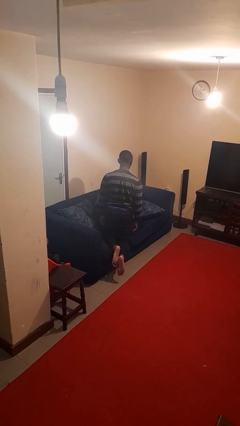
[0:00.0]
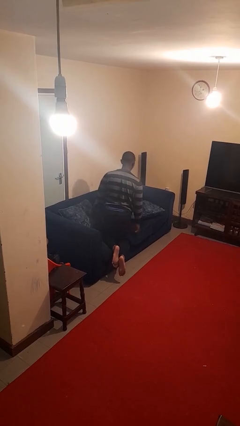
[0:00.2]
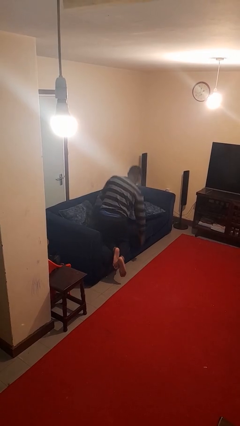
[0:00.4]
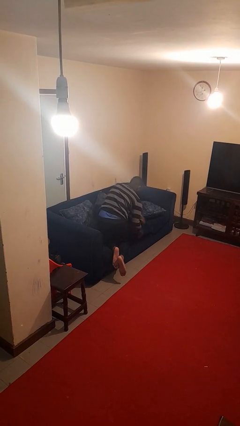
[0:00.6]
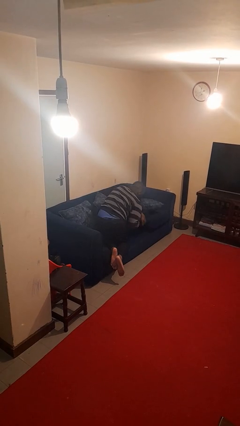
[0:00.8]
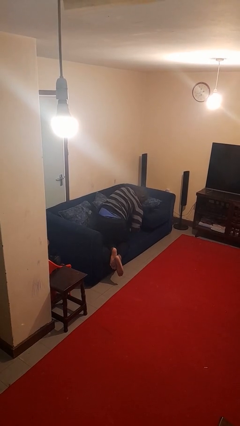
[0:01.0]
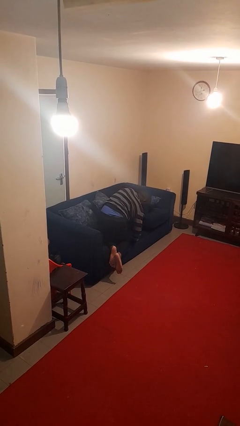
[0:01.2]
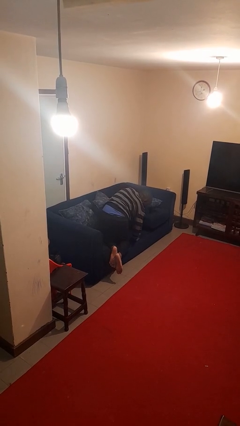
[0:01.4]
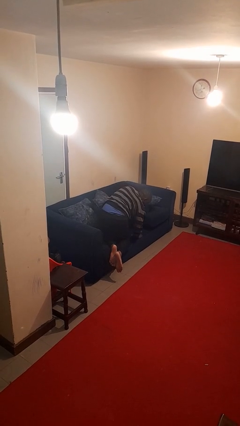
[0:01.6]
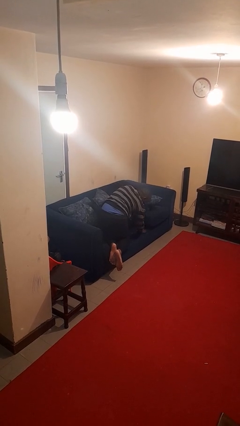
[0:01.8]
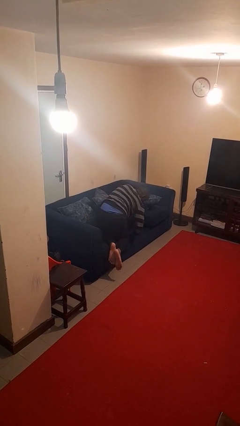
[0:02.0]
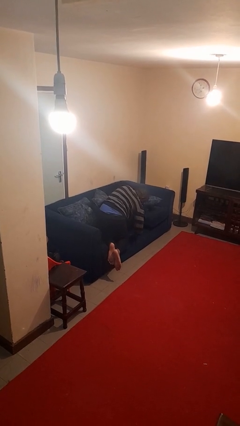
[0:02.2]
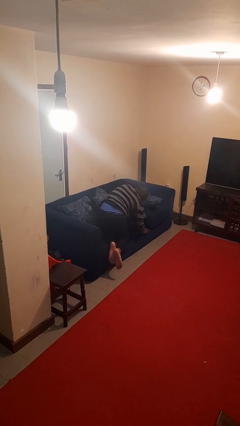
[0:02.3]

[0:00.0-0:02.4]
person searches in couch

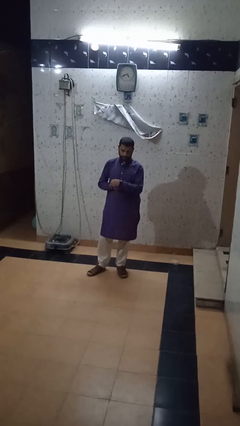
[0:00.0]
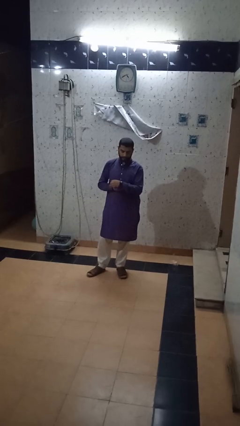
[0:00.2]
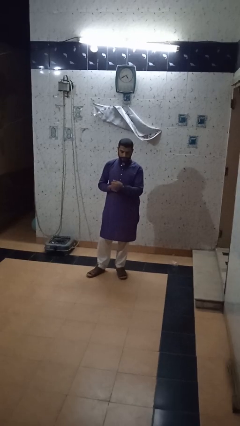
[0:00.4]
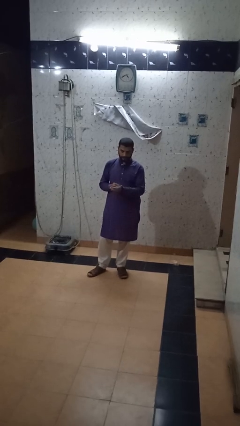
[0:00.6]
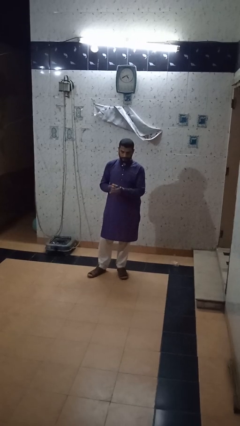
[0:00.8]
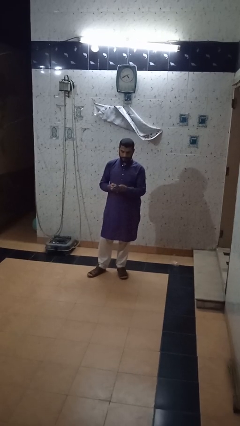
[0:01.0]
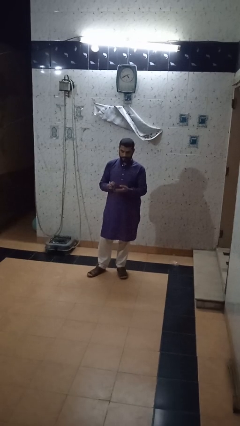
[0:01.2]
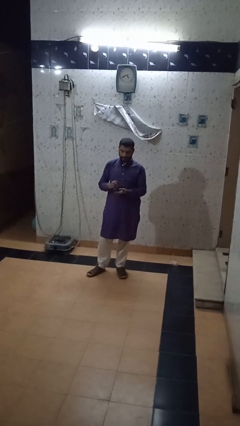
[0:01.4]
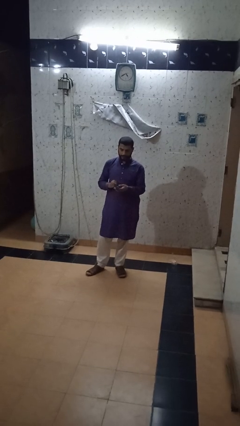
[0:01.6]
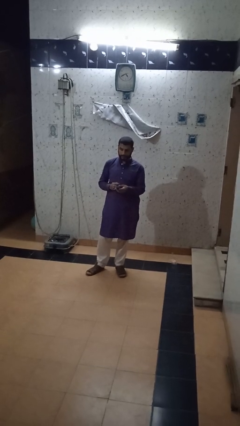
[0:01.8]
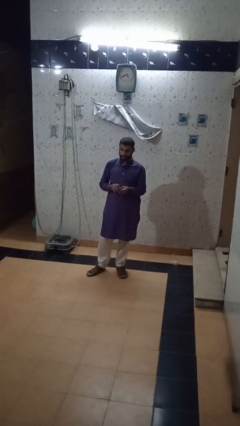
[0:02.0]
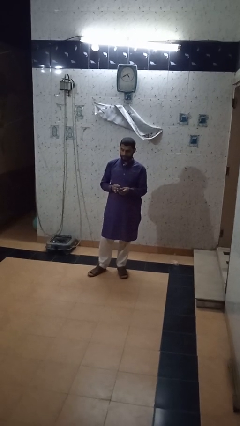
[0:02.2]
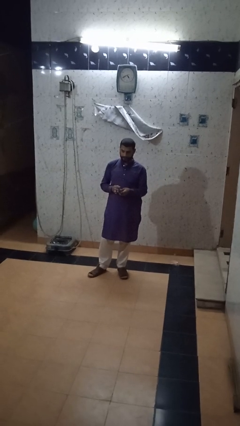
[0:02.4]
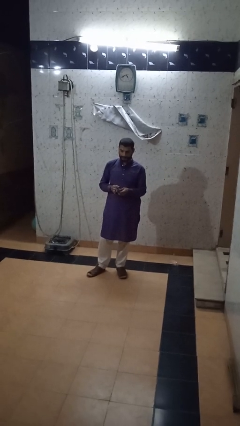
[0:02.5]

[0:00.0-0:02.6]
person takes off wristwatch

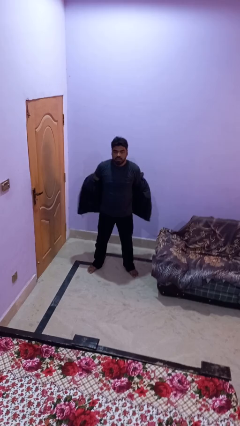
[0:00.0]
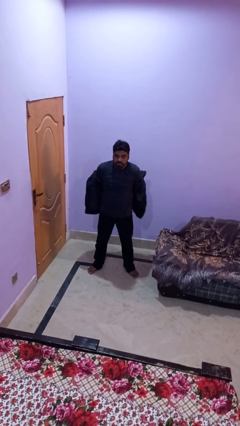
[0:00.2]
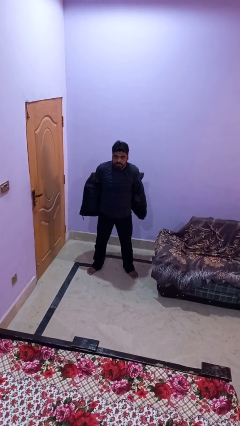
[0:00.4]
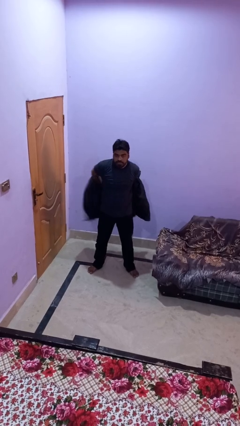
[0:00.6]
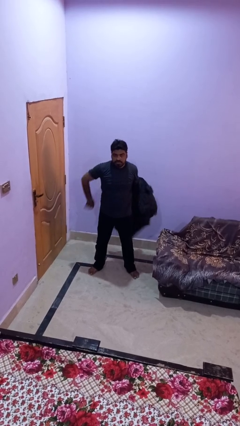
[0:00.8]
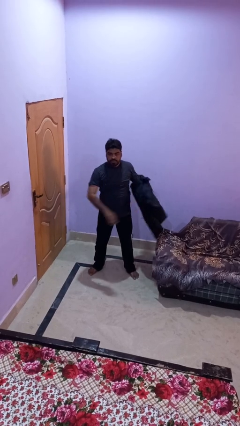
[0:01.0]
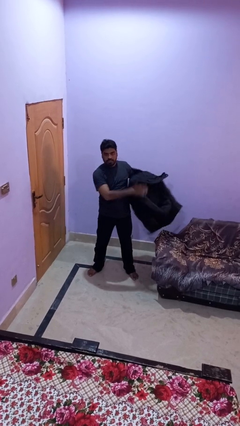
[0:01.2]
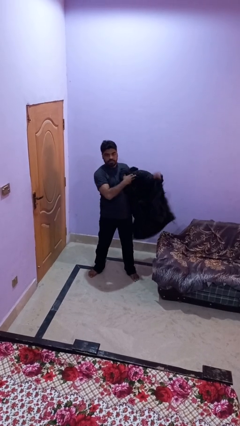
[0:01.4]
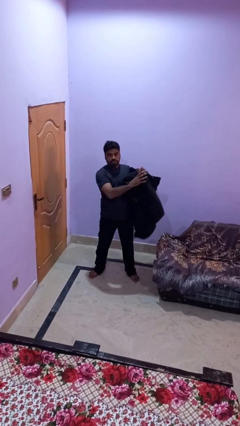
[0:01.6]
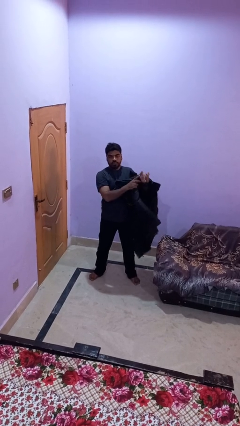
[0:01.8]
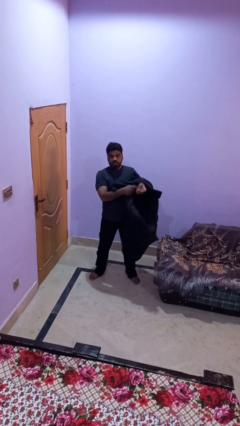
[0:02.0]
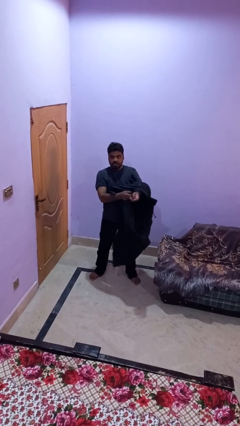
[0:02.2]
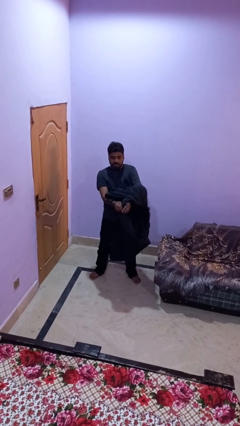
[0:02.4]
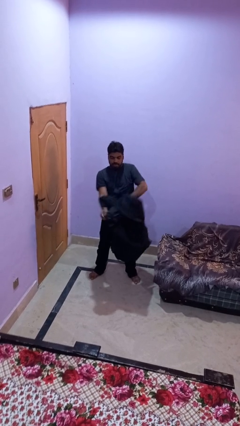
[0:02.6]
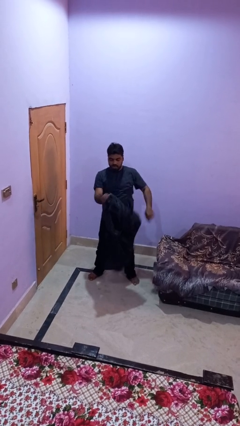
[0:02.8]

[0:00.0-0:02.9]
person takes off jacket

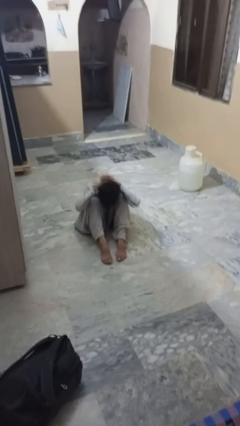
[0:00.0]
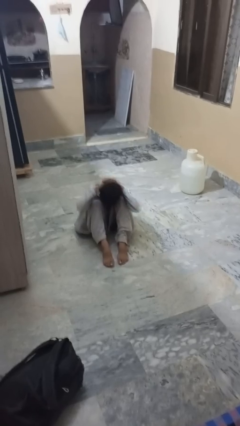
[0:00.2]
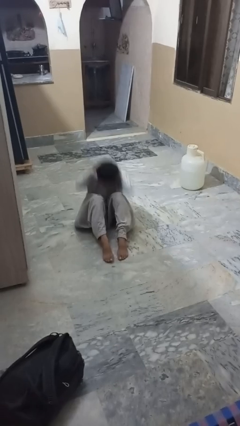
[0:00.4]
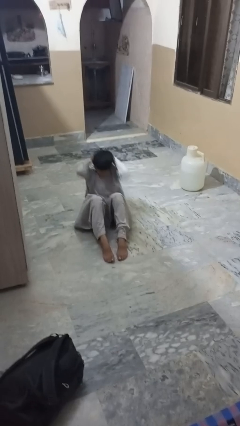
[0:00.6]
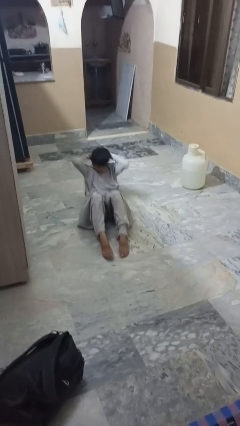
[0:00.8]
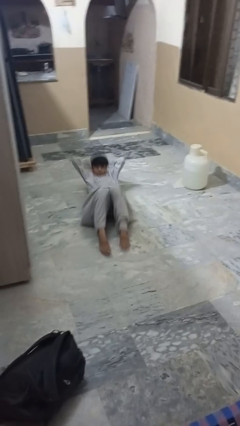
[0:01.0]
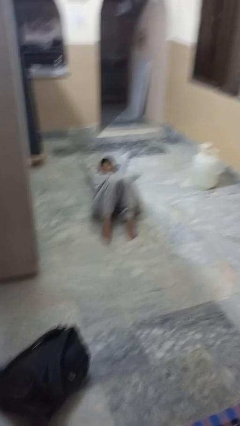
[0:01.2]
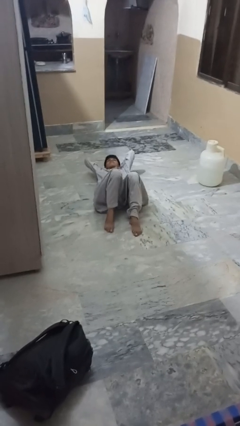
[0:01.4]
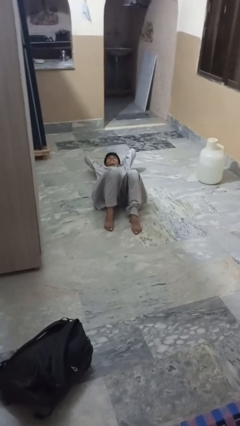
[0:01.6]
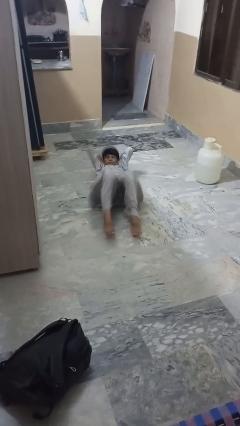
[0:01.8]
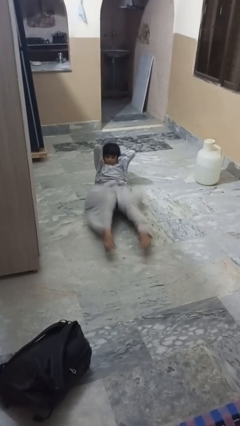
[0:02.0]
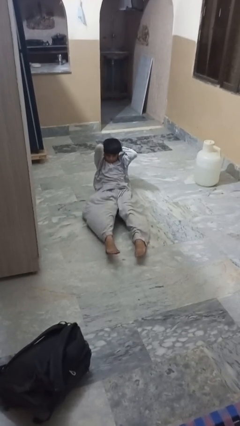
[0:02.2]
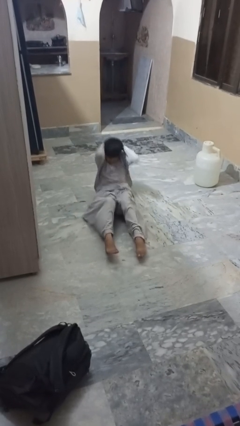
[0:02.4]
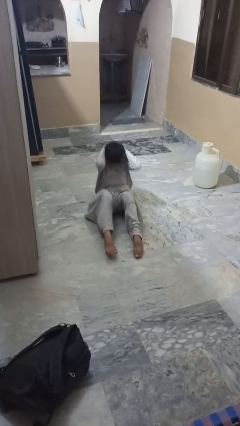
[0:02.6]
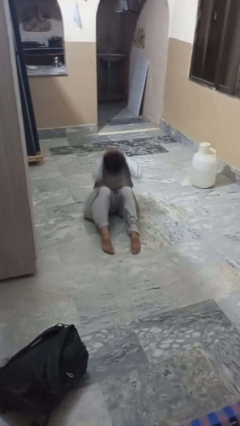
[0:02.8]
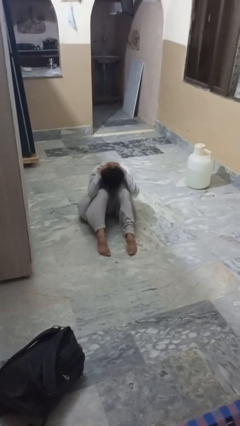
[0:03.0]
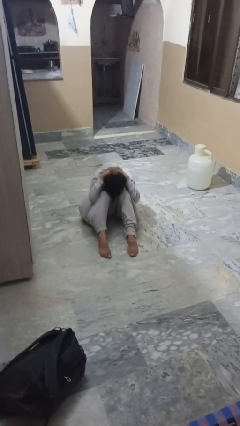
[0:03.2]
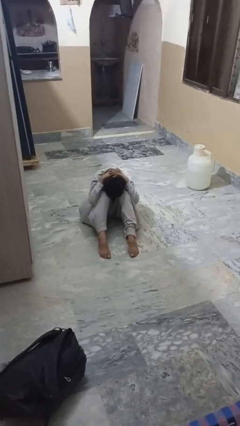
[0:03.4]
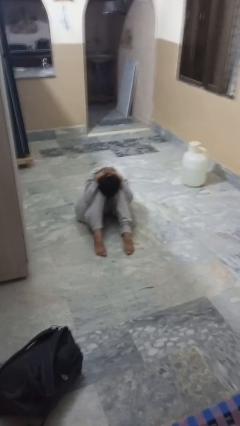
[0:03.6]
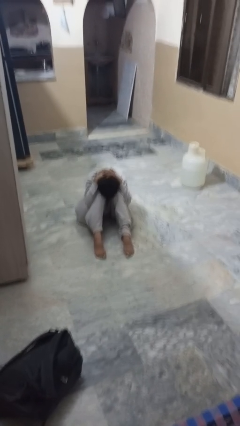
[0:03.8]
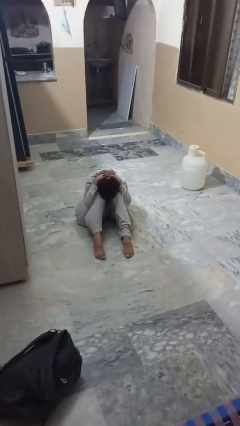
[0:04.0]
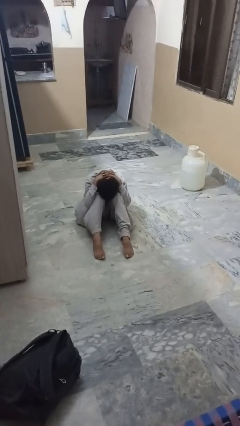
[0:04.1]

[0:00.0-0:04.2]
person exercises with situp

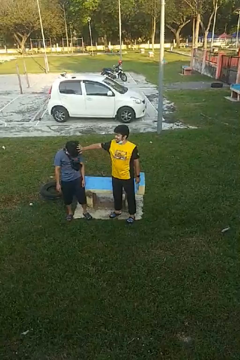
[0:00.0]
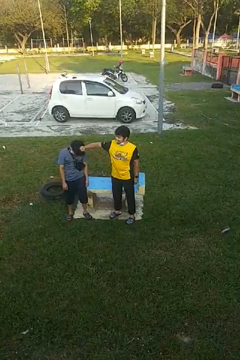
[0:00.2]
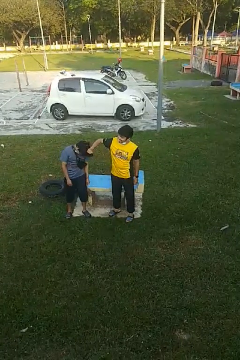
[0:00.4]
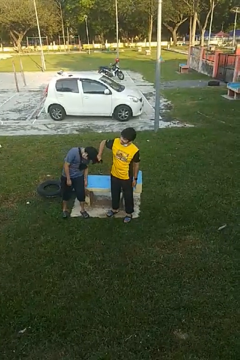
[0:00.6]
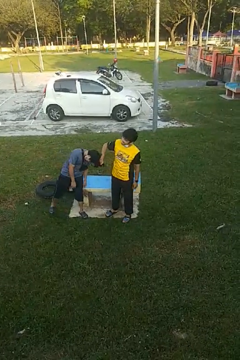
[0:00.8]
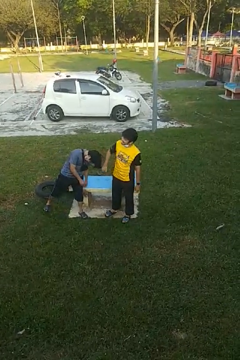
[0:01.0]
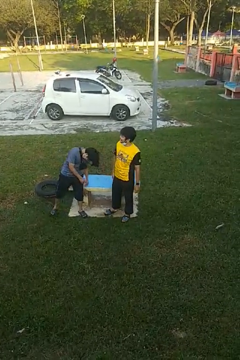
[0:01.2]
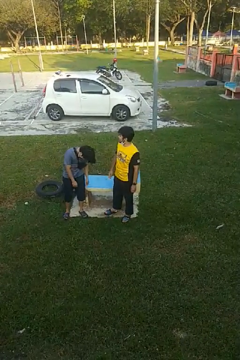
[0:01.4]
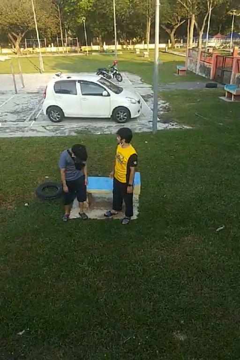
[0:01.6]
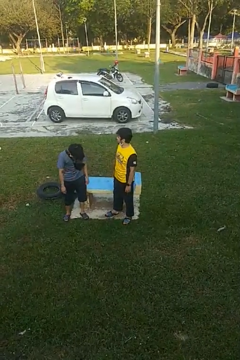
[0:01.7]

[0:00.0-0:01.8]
person grabs person by hair

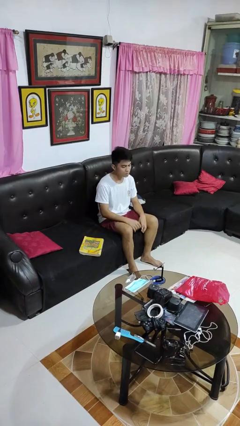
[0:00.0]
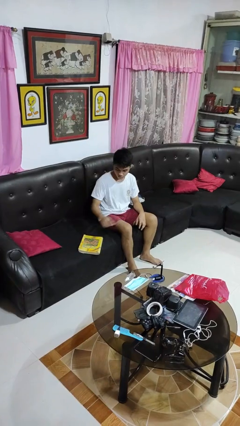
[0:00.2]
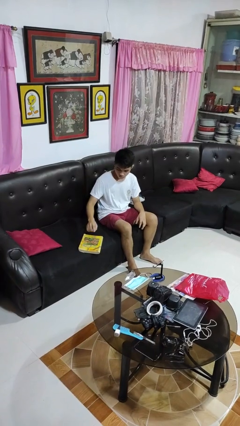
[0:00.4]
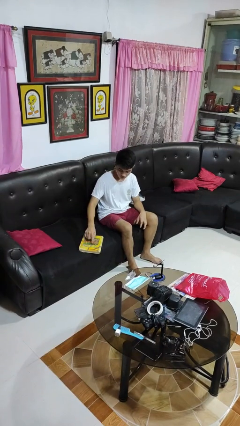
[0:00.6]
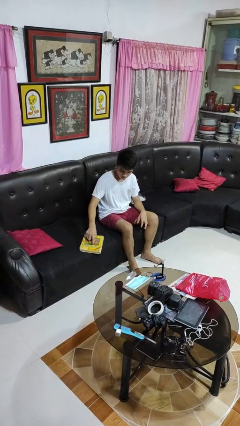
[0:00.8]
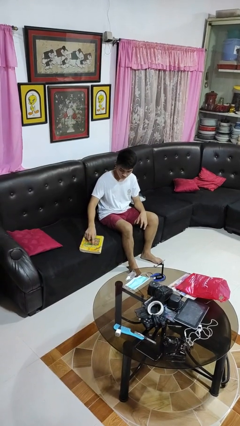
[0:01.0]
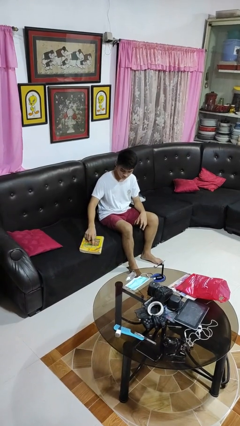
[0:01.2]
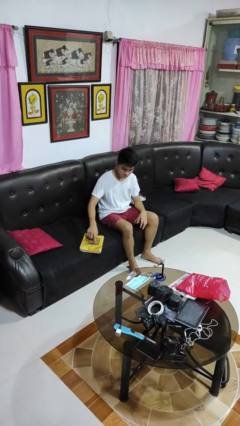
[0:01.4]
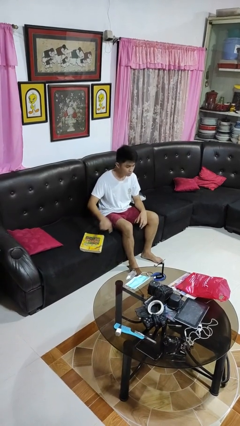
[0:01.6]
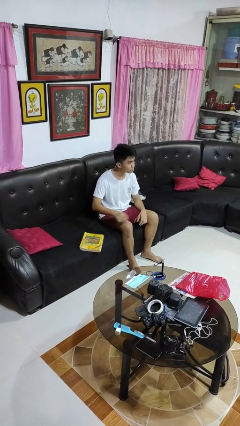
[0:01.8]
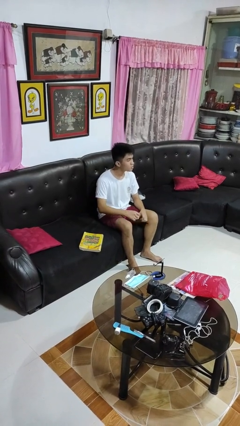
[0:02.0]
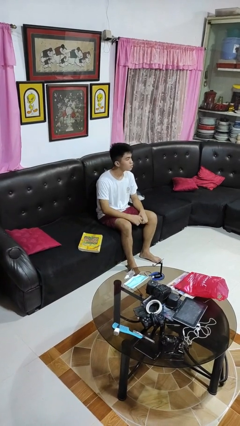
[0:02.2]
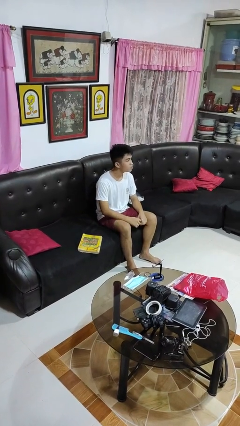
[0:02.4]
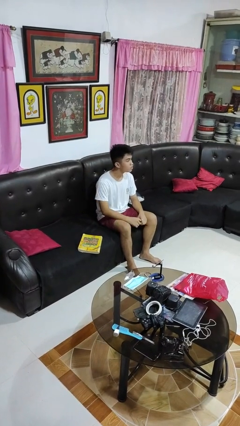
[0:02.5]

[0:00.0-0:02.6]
person taps object with finger

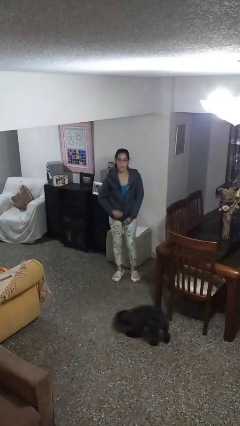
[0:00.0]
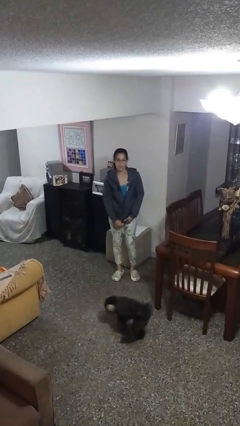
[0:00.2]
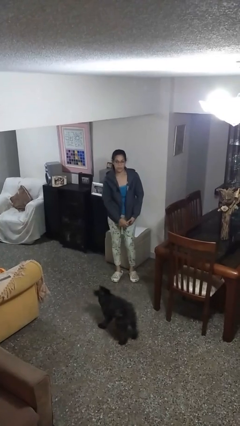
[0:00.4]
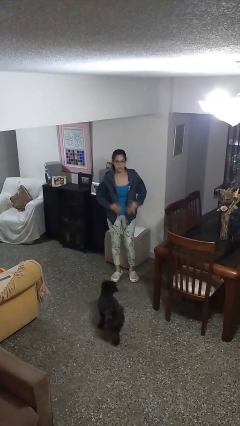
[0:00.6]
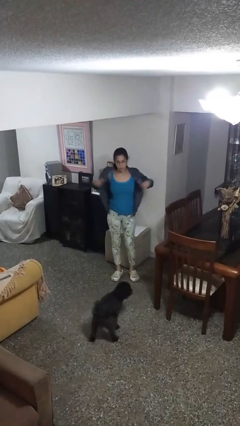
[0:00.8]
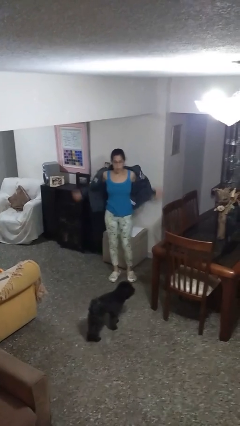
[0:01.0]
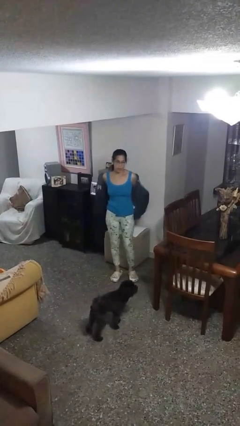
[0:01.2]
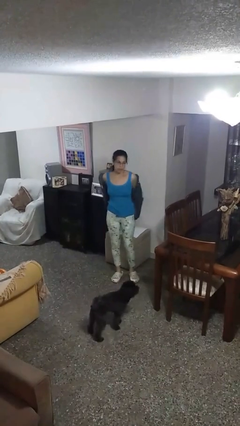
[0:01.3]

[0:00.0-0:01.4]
person unzips jacket
